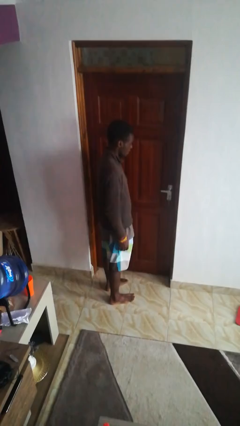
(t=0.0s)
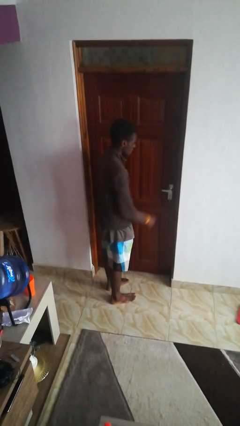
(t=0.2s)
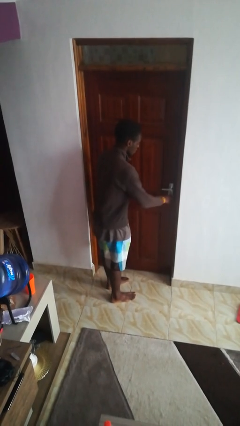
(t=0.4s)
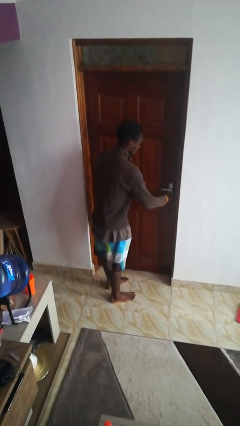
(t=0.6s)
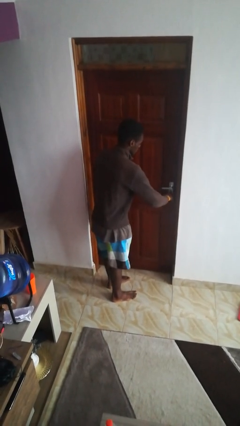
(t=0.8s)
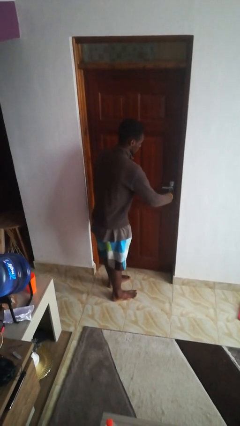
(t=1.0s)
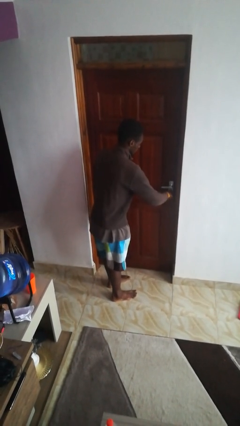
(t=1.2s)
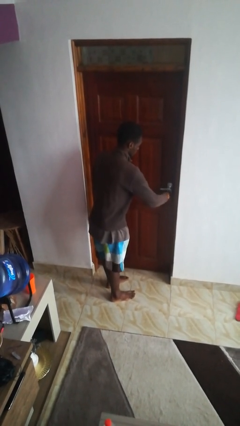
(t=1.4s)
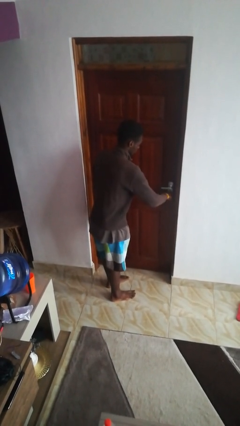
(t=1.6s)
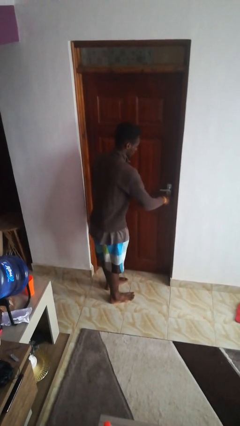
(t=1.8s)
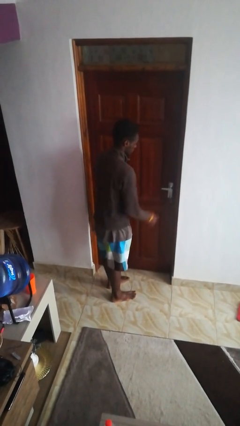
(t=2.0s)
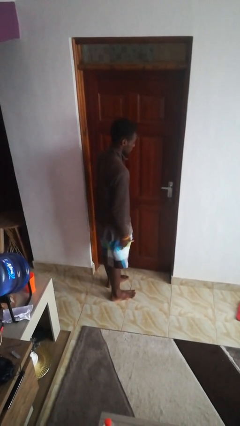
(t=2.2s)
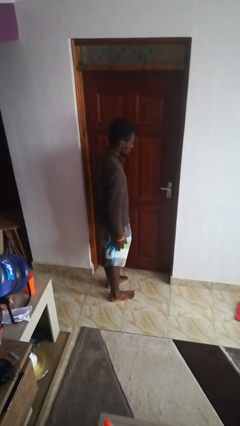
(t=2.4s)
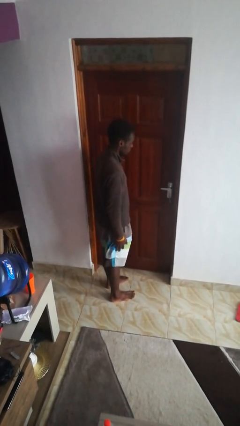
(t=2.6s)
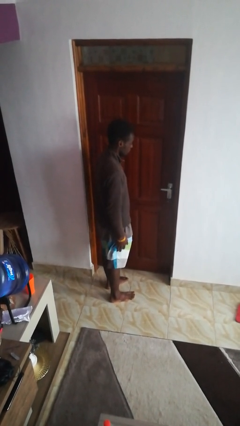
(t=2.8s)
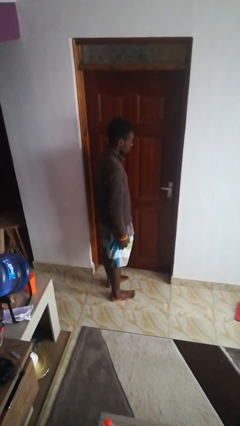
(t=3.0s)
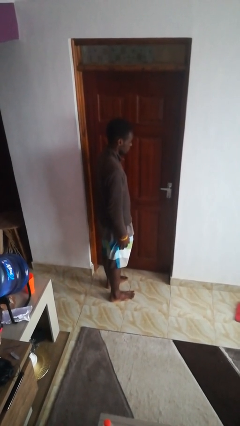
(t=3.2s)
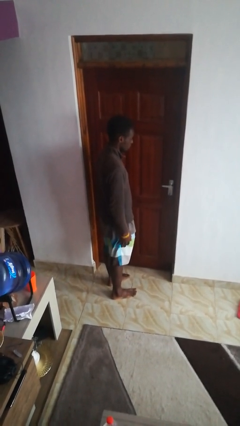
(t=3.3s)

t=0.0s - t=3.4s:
person unlocks door with keys

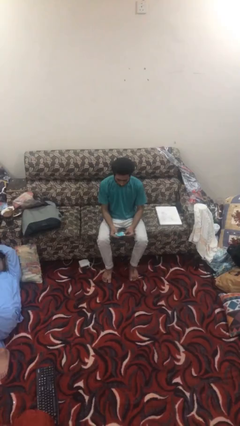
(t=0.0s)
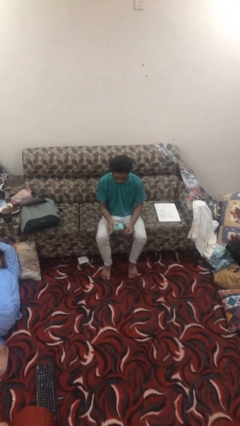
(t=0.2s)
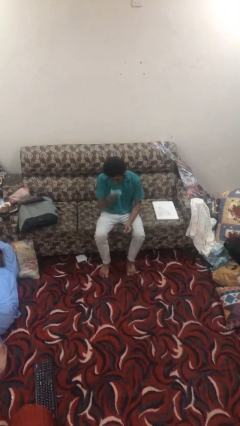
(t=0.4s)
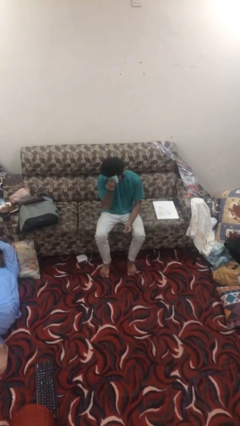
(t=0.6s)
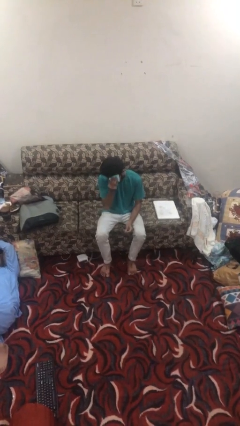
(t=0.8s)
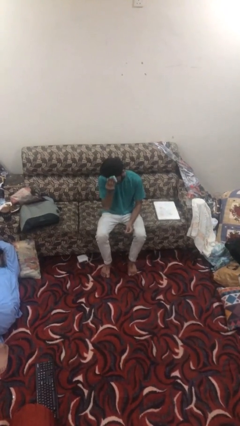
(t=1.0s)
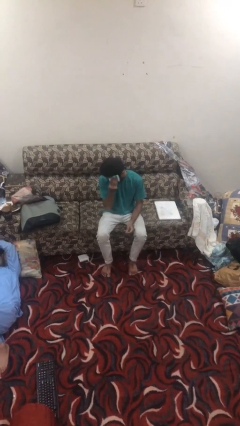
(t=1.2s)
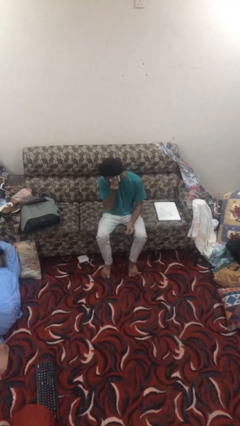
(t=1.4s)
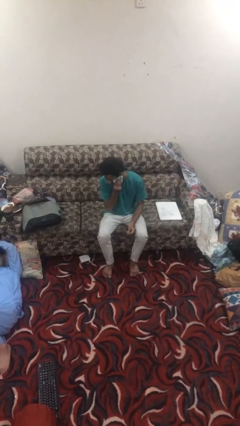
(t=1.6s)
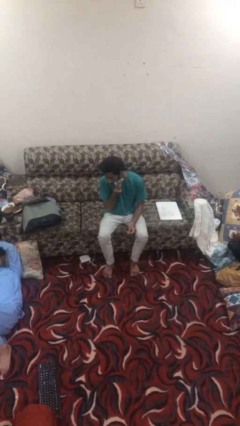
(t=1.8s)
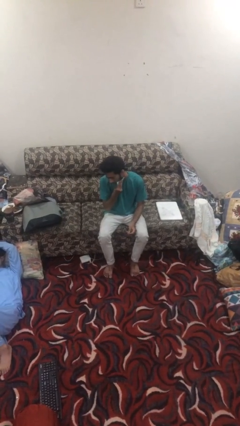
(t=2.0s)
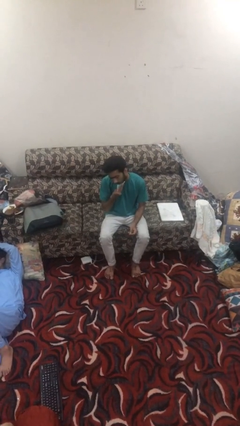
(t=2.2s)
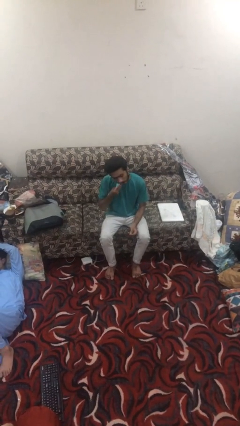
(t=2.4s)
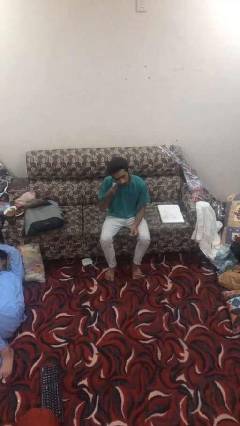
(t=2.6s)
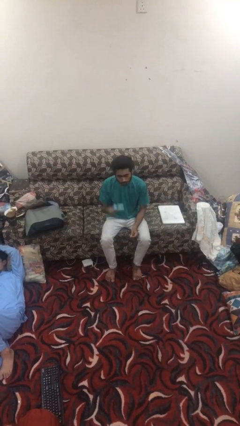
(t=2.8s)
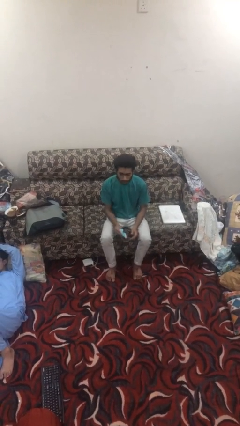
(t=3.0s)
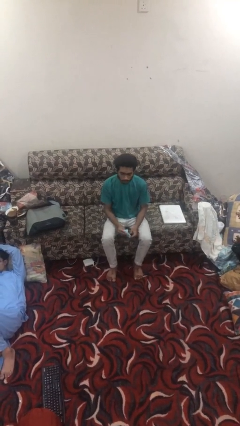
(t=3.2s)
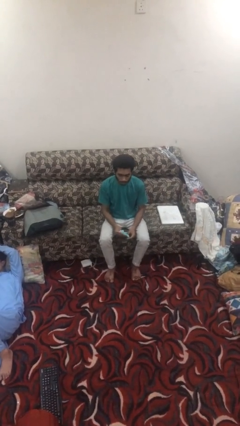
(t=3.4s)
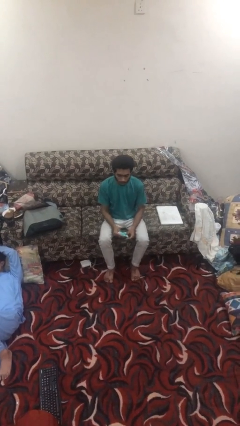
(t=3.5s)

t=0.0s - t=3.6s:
person wipes mouth with napkin

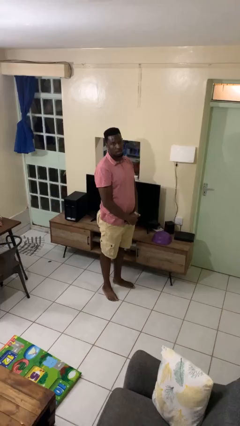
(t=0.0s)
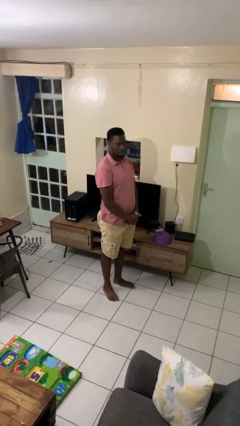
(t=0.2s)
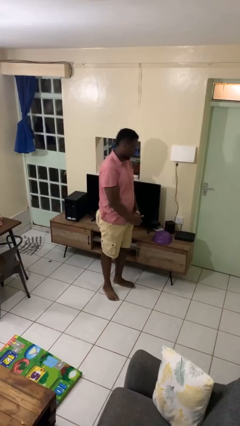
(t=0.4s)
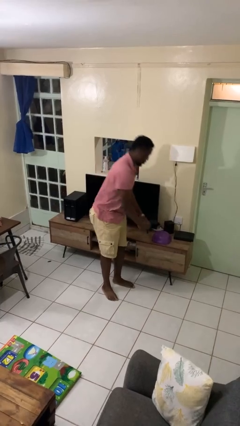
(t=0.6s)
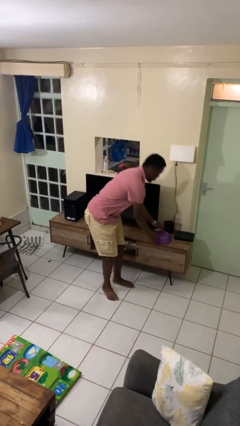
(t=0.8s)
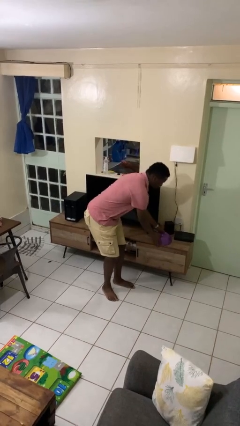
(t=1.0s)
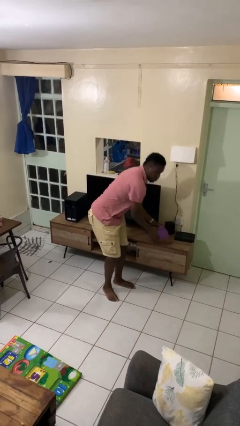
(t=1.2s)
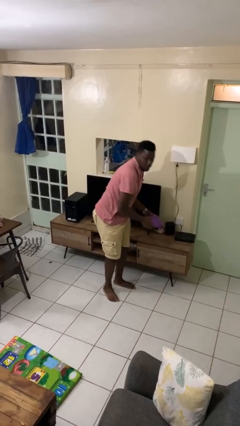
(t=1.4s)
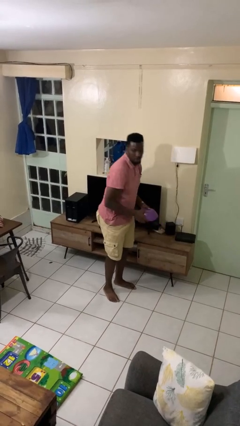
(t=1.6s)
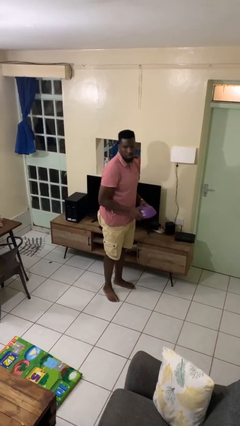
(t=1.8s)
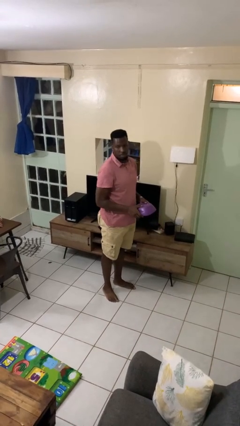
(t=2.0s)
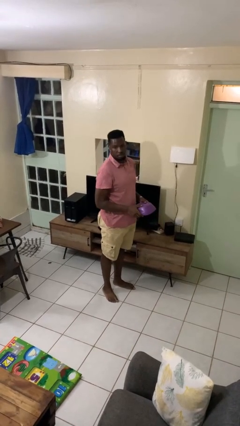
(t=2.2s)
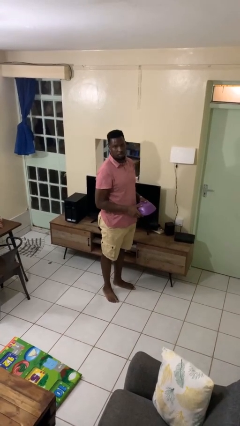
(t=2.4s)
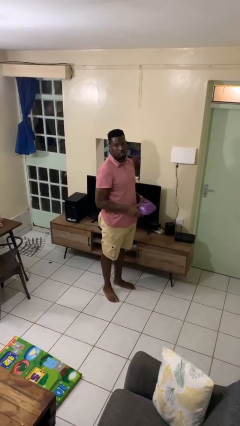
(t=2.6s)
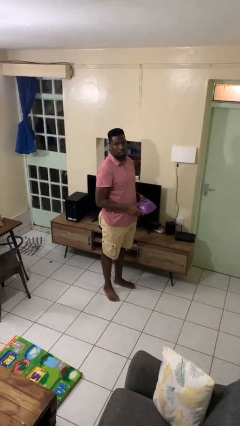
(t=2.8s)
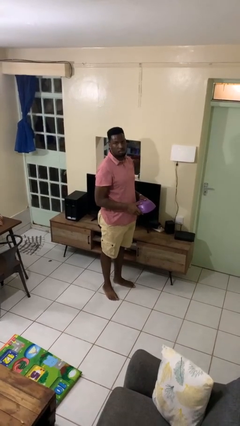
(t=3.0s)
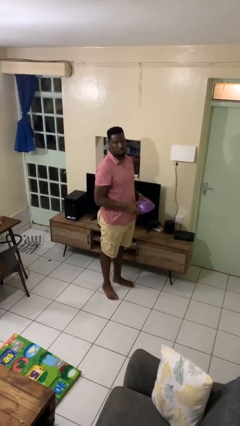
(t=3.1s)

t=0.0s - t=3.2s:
person picks up object from countertop

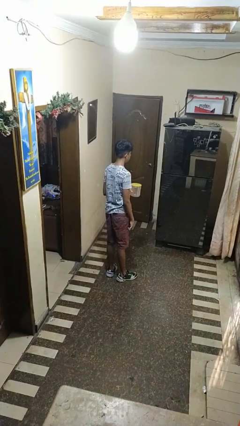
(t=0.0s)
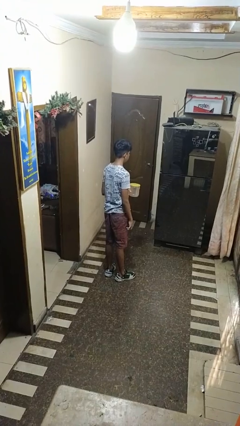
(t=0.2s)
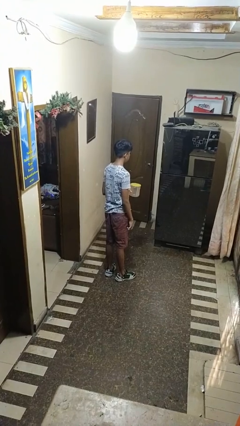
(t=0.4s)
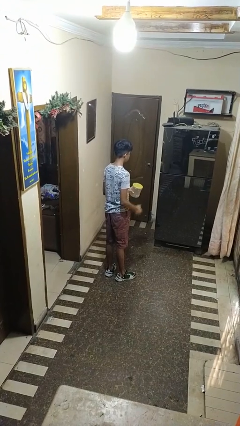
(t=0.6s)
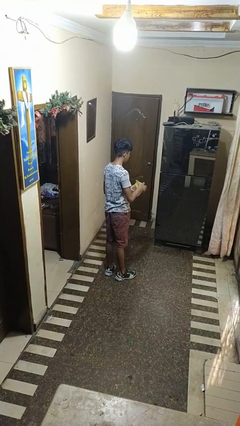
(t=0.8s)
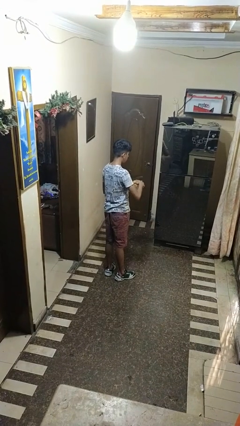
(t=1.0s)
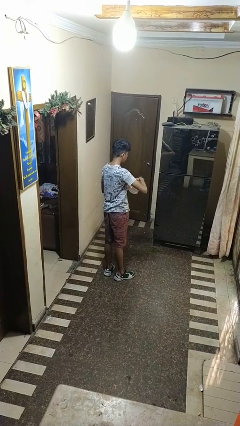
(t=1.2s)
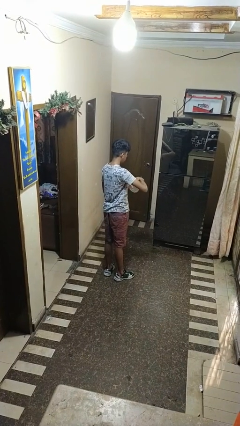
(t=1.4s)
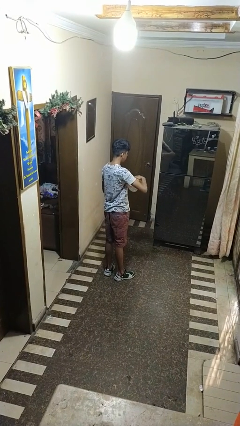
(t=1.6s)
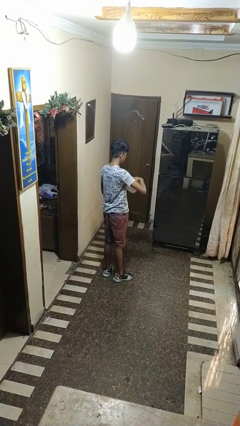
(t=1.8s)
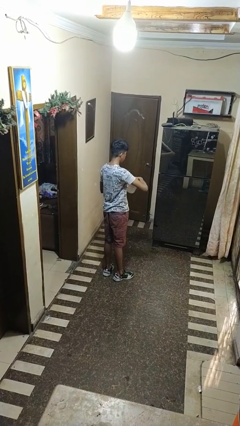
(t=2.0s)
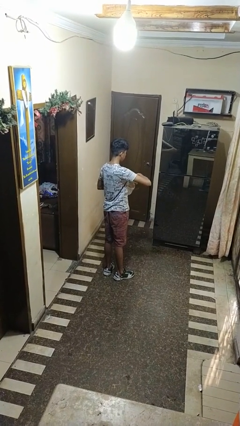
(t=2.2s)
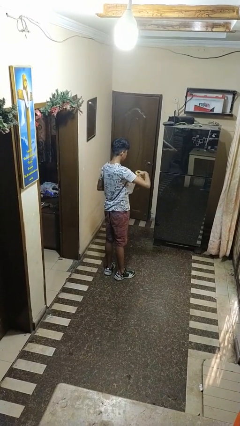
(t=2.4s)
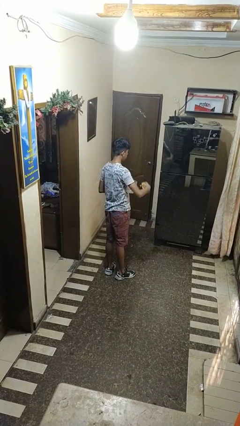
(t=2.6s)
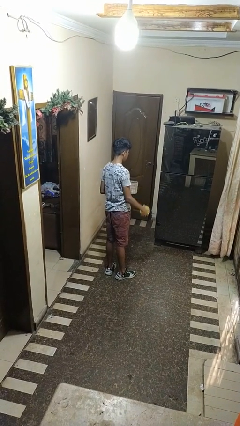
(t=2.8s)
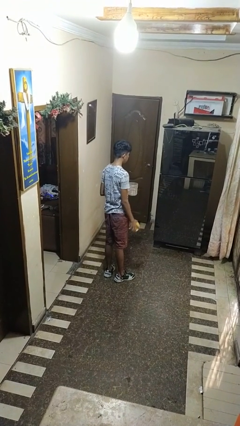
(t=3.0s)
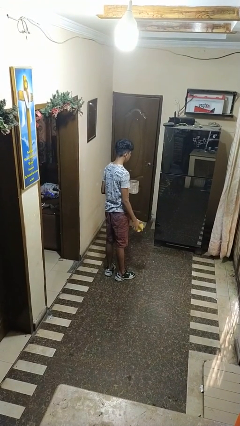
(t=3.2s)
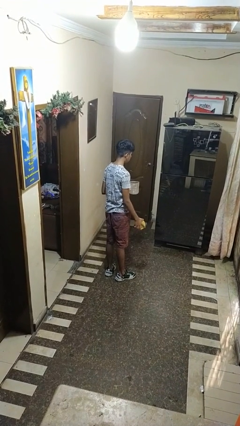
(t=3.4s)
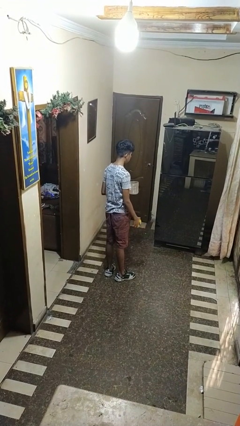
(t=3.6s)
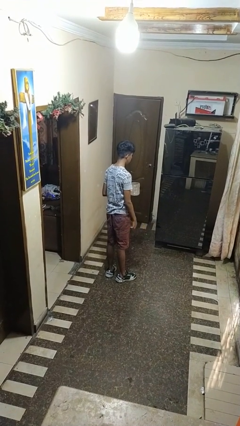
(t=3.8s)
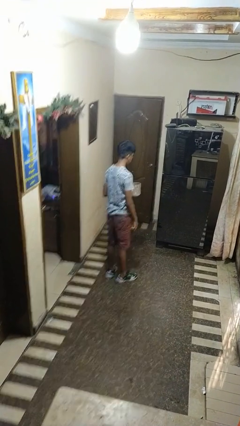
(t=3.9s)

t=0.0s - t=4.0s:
person opens jar

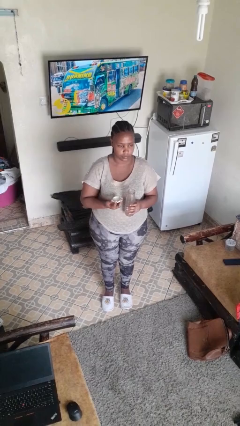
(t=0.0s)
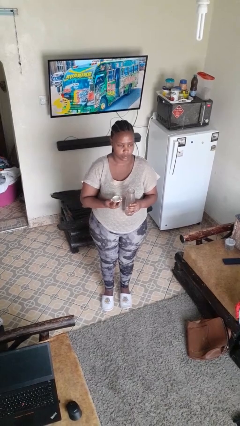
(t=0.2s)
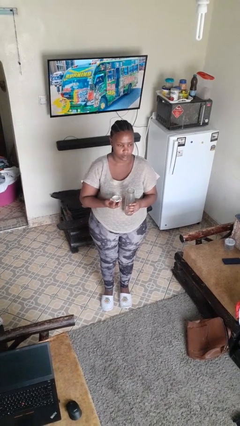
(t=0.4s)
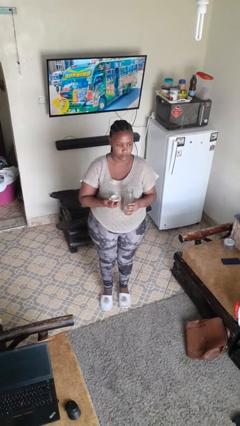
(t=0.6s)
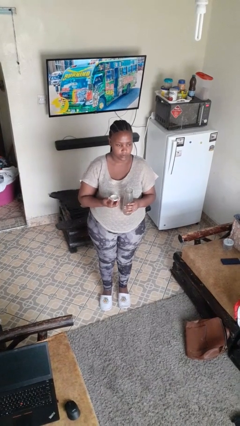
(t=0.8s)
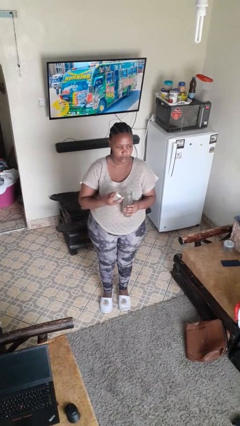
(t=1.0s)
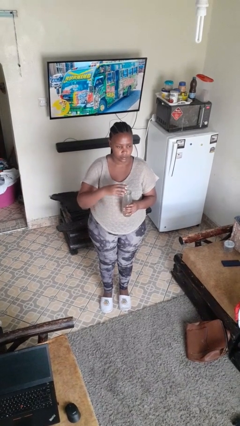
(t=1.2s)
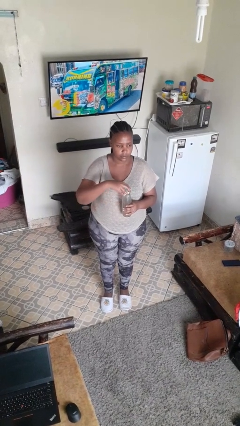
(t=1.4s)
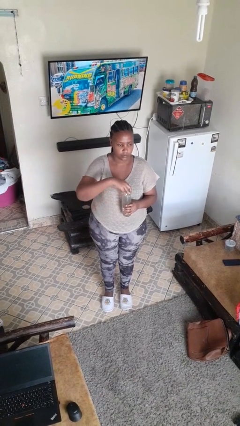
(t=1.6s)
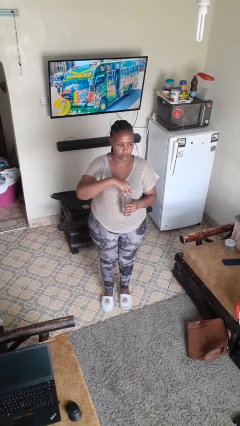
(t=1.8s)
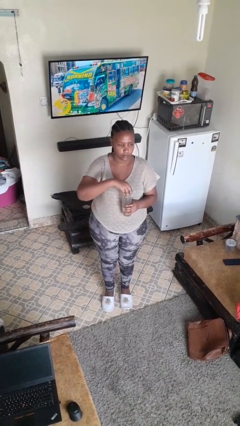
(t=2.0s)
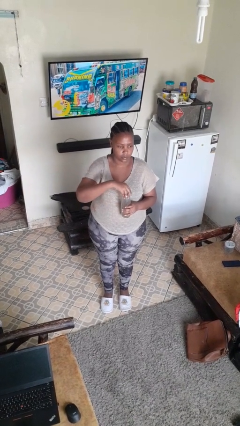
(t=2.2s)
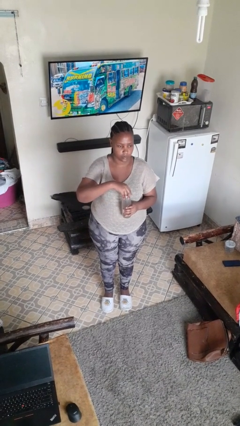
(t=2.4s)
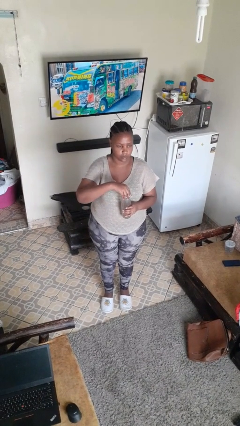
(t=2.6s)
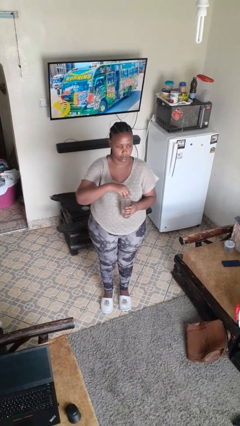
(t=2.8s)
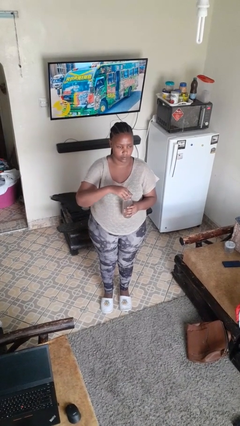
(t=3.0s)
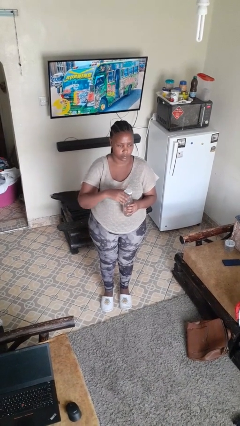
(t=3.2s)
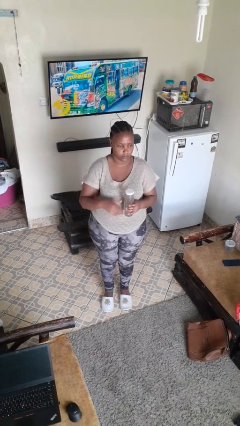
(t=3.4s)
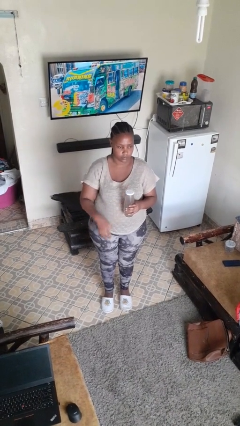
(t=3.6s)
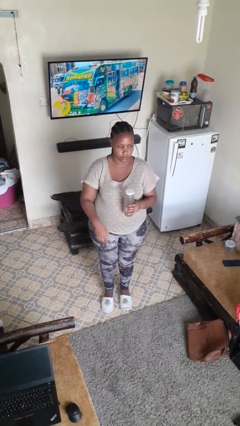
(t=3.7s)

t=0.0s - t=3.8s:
person screws lid to bottle
